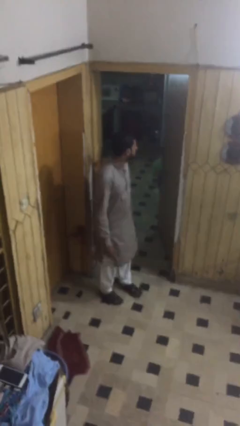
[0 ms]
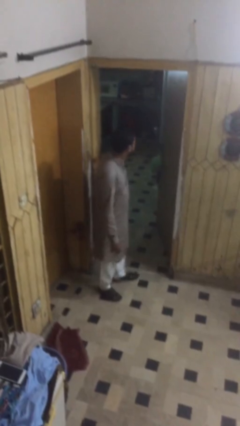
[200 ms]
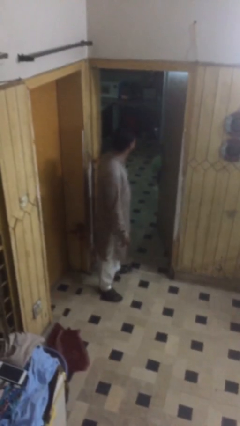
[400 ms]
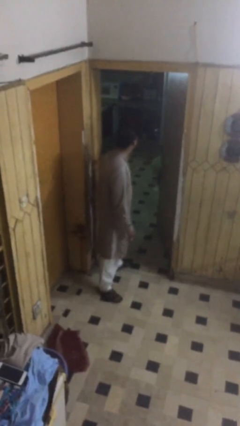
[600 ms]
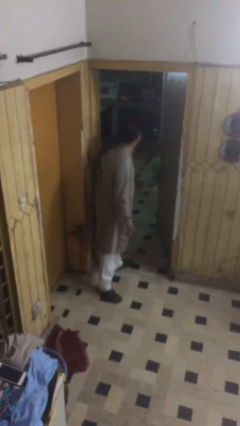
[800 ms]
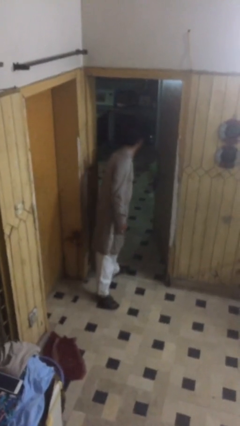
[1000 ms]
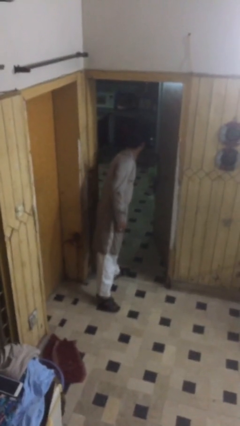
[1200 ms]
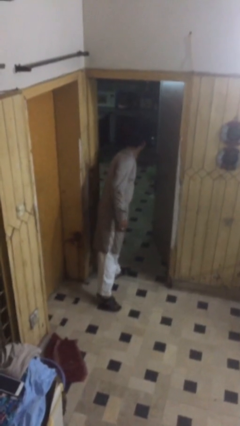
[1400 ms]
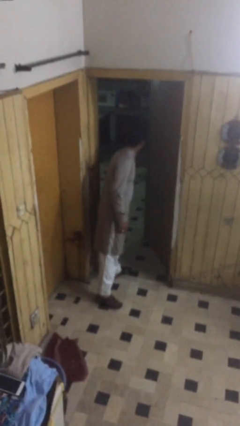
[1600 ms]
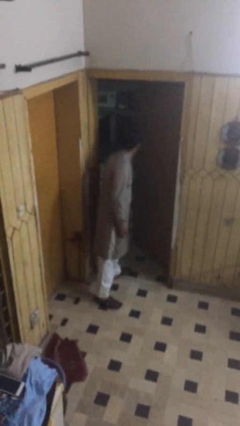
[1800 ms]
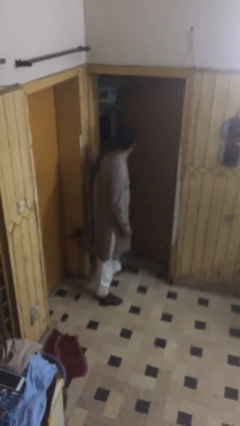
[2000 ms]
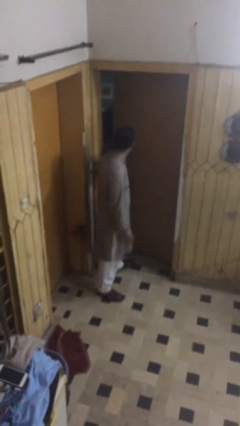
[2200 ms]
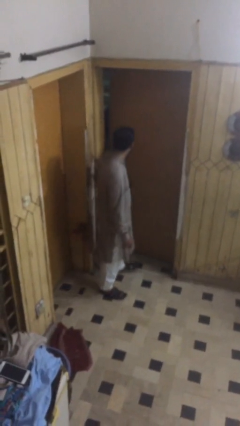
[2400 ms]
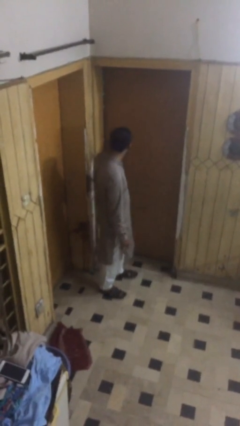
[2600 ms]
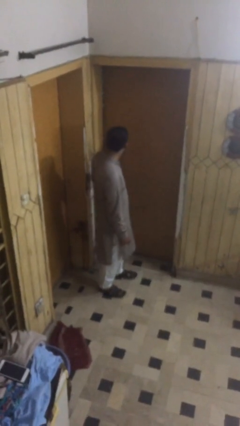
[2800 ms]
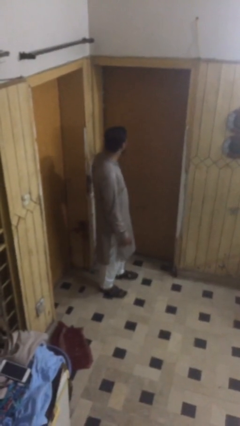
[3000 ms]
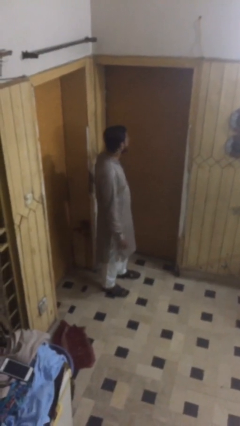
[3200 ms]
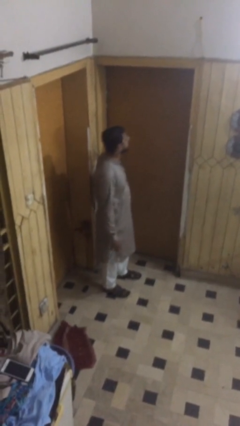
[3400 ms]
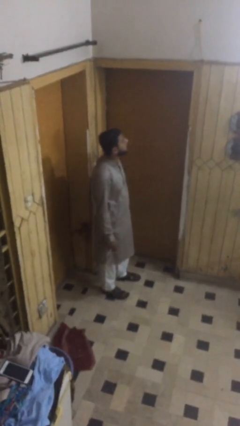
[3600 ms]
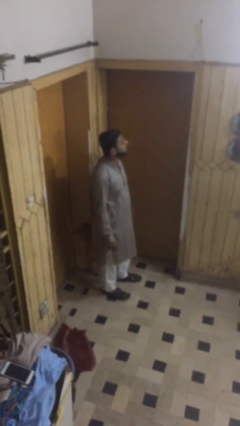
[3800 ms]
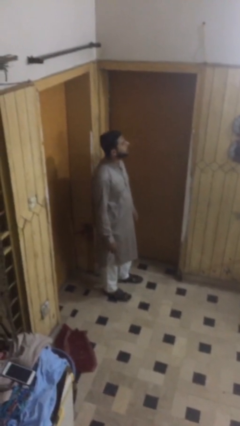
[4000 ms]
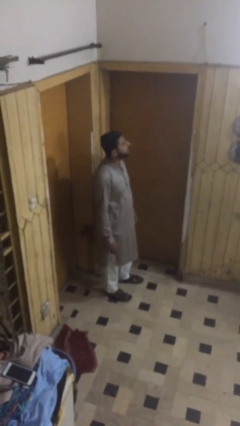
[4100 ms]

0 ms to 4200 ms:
person closes facility door

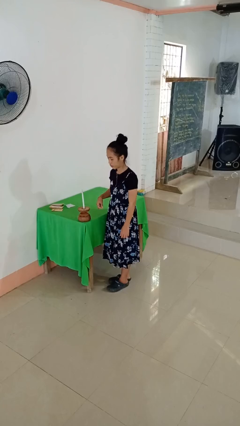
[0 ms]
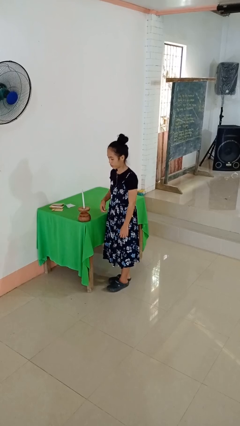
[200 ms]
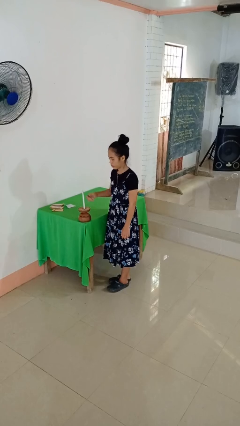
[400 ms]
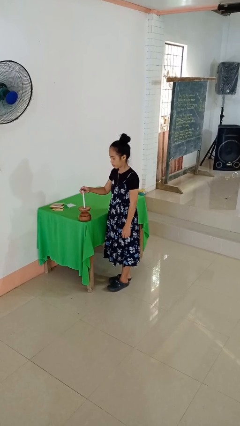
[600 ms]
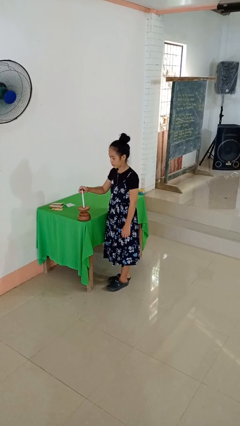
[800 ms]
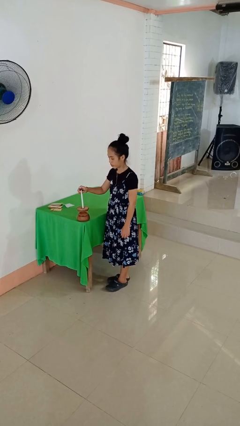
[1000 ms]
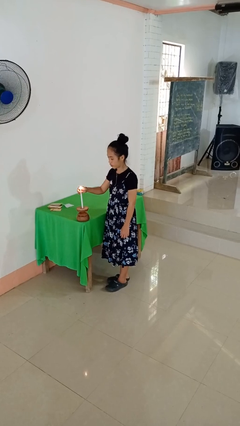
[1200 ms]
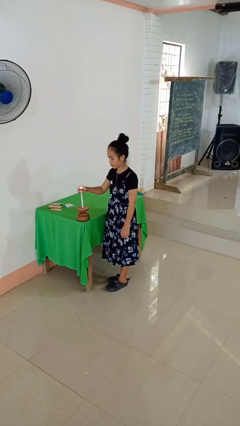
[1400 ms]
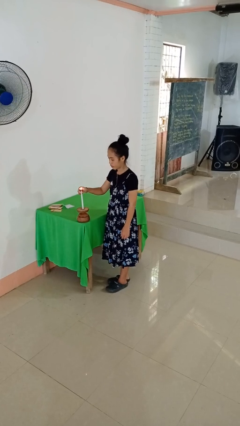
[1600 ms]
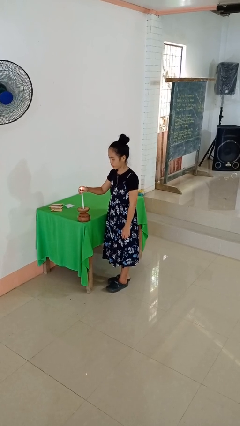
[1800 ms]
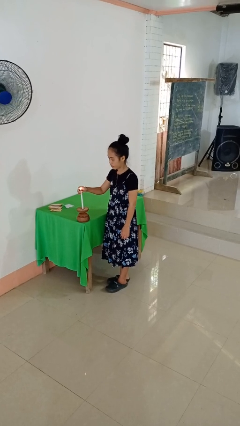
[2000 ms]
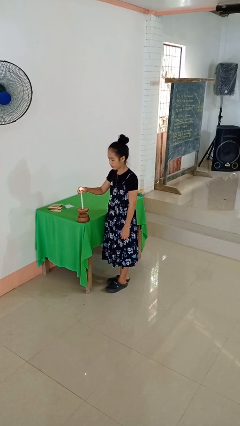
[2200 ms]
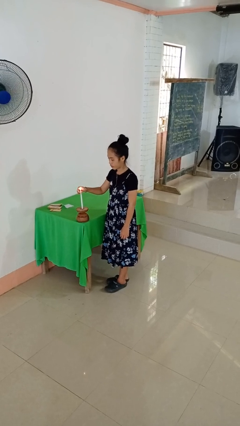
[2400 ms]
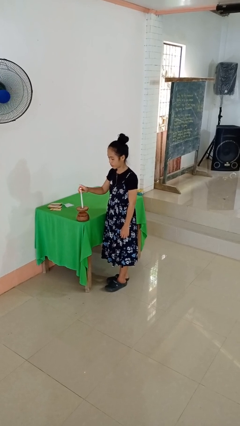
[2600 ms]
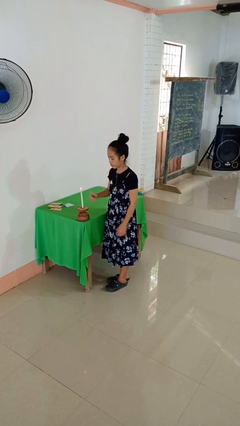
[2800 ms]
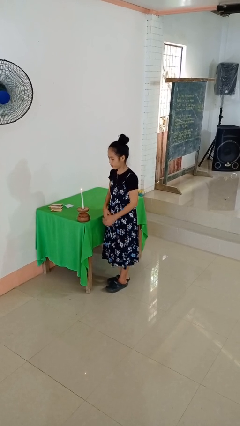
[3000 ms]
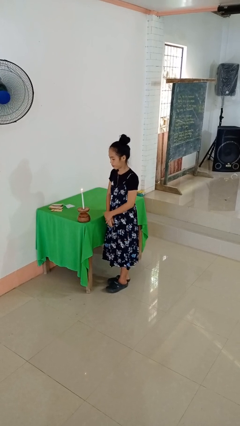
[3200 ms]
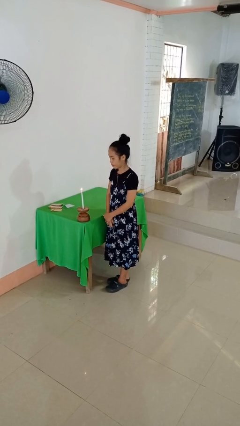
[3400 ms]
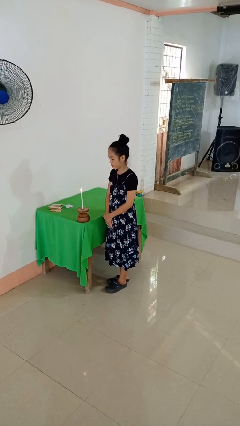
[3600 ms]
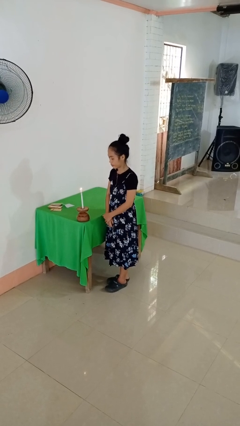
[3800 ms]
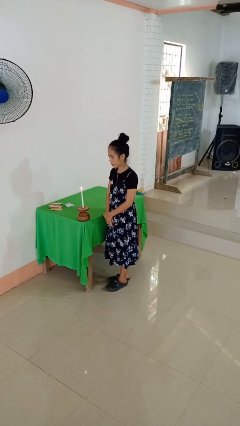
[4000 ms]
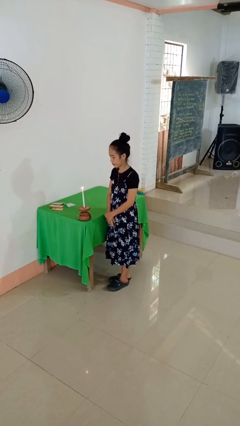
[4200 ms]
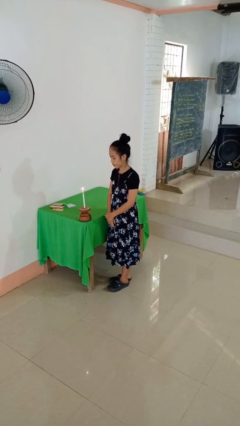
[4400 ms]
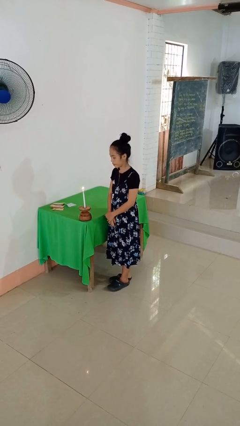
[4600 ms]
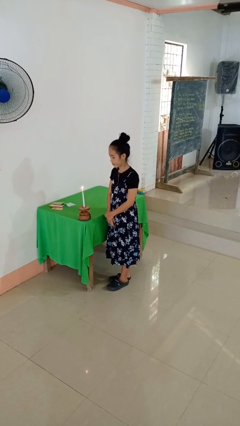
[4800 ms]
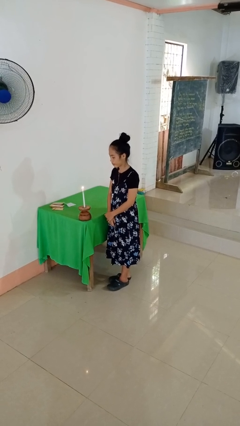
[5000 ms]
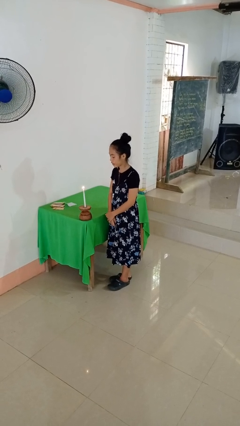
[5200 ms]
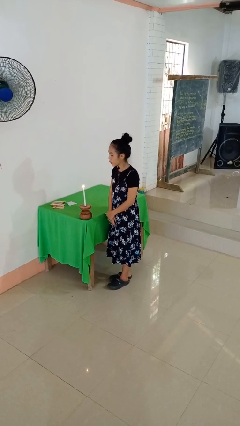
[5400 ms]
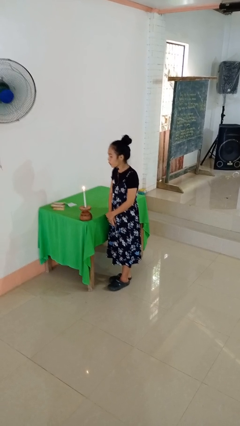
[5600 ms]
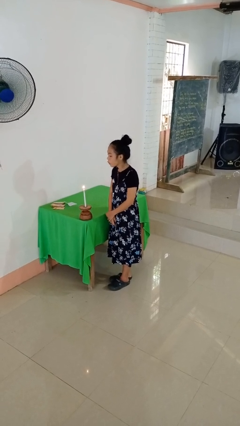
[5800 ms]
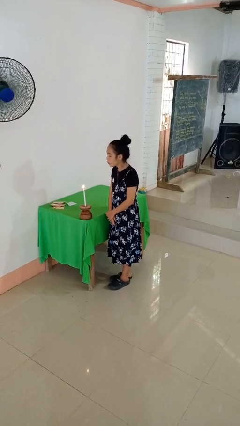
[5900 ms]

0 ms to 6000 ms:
person lights candle

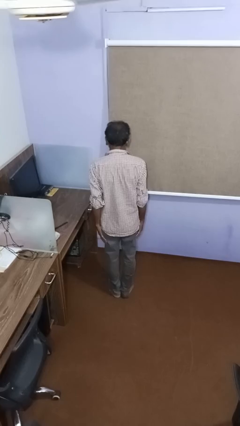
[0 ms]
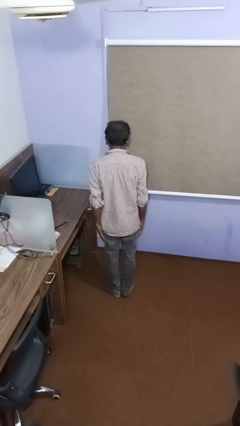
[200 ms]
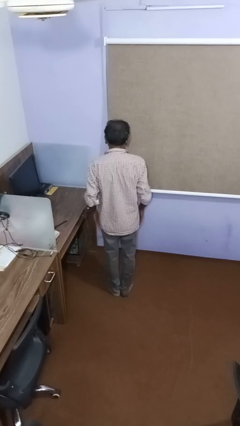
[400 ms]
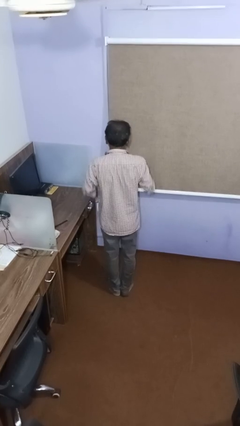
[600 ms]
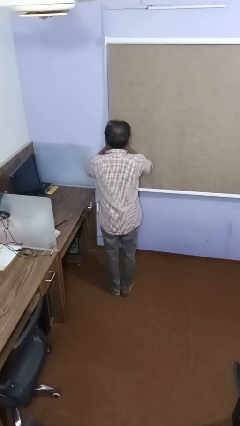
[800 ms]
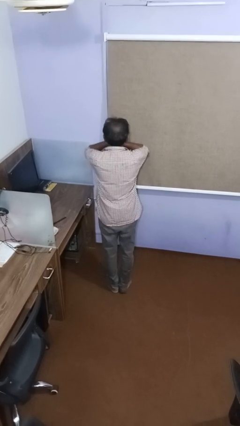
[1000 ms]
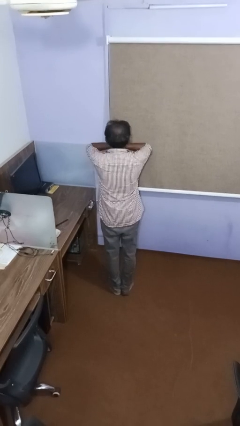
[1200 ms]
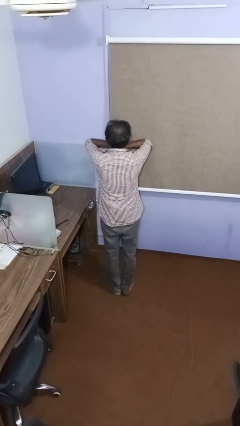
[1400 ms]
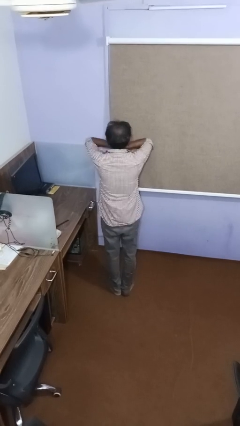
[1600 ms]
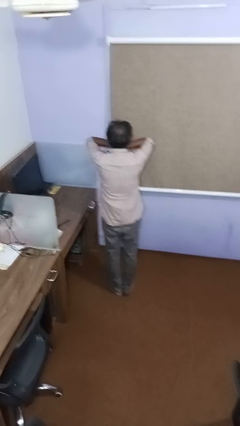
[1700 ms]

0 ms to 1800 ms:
person covers face with hands

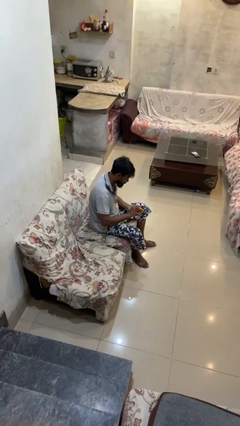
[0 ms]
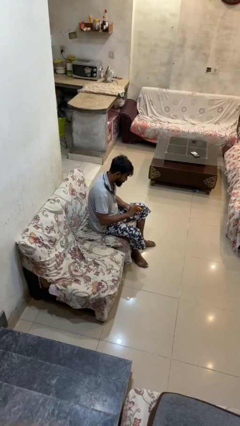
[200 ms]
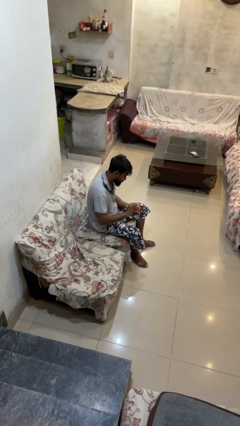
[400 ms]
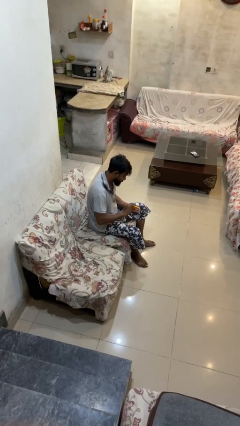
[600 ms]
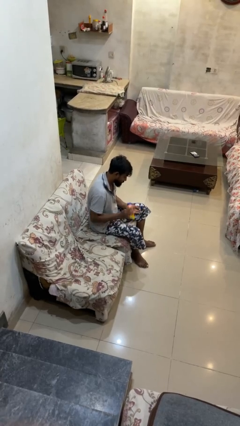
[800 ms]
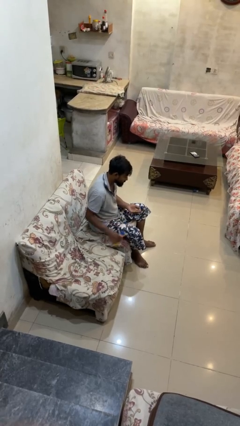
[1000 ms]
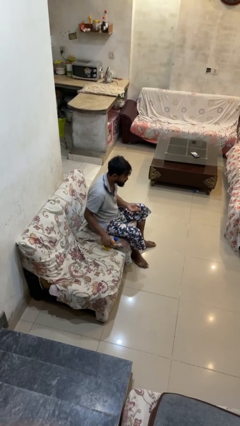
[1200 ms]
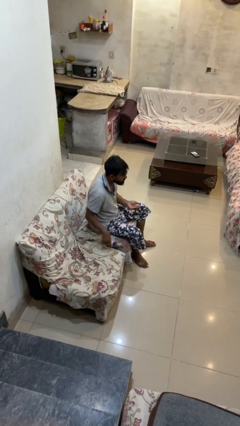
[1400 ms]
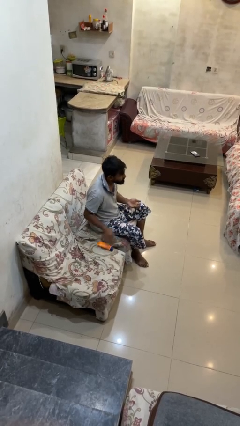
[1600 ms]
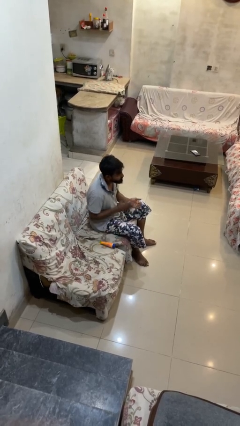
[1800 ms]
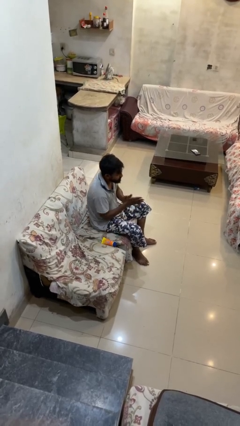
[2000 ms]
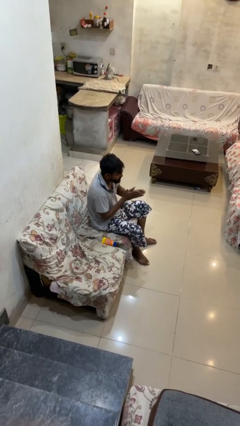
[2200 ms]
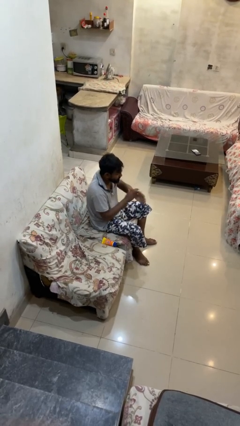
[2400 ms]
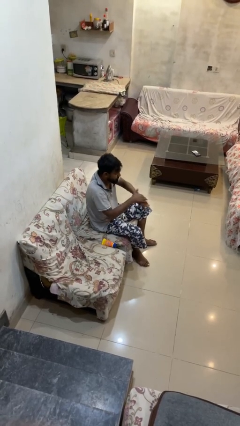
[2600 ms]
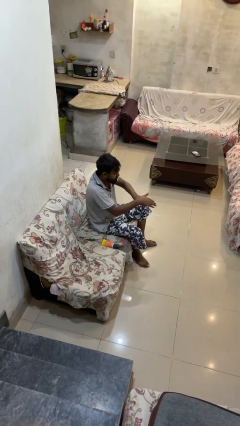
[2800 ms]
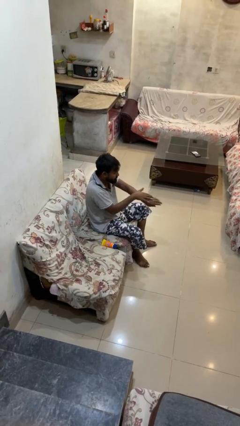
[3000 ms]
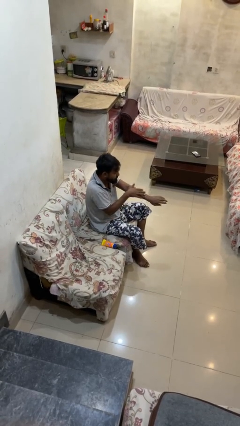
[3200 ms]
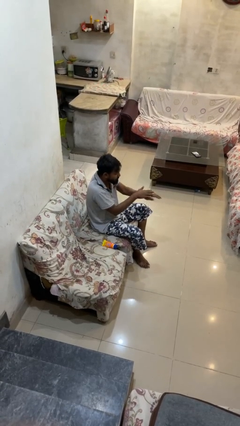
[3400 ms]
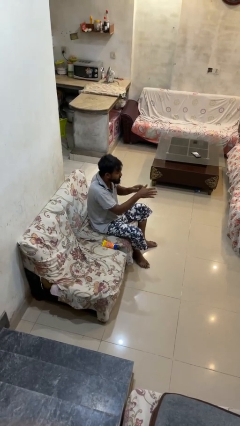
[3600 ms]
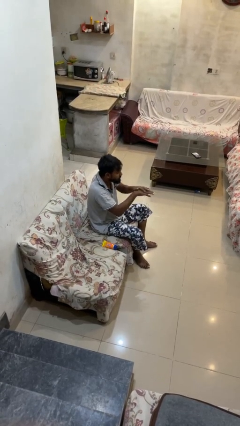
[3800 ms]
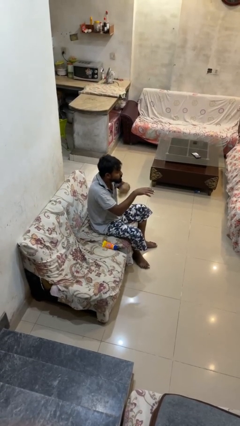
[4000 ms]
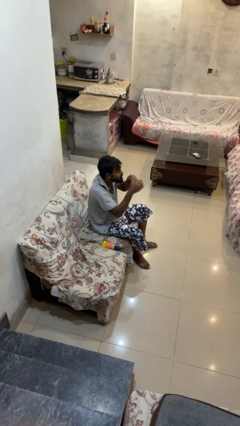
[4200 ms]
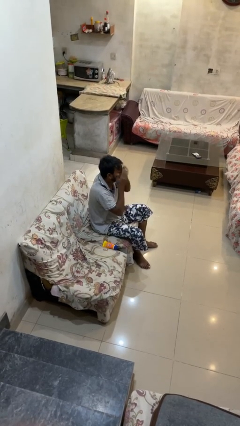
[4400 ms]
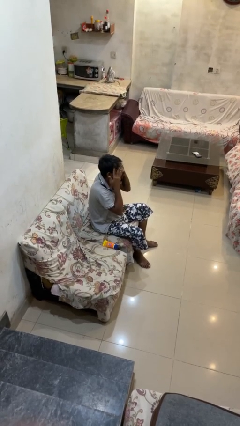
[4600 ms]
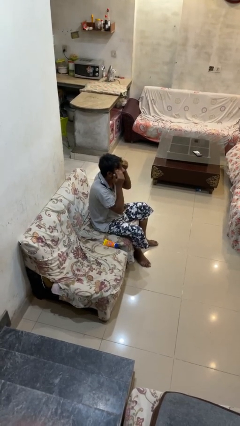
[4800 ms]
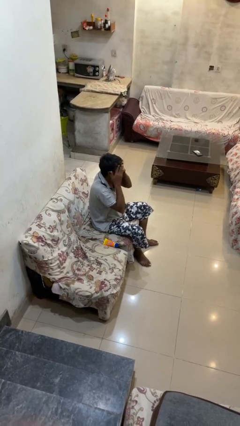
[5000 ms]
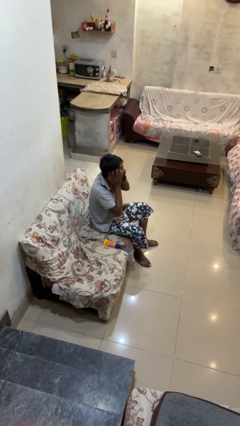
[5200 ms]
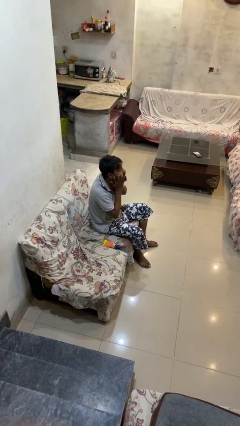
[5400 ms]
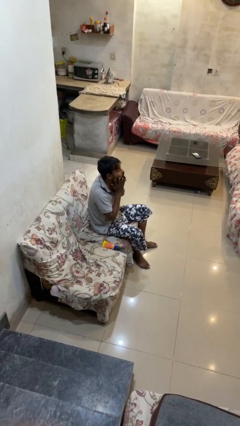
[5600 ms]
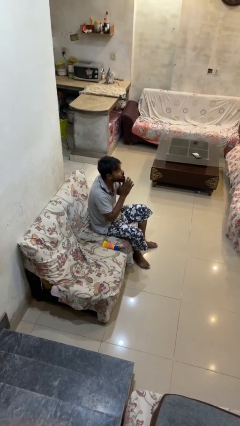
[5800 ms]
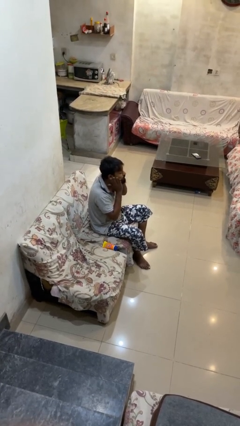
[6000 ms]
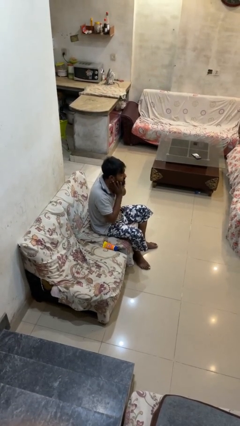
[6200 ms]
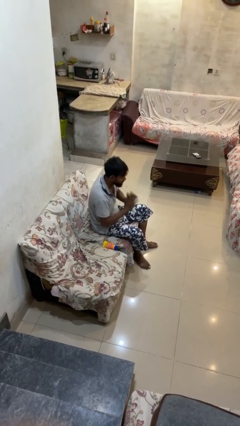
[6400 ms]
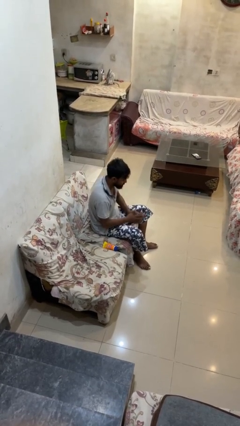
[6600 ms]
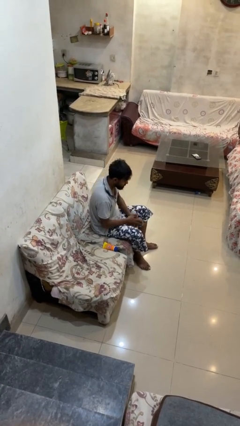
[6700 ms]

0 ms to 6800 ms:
person applies facial moisturizer
